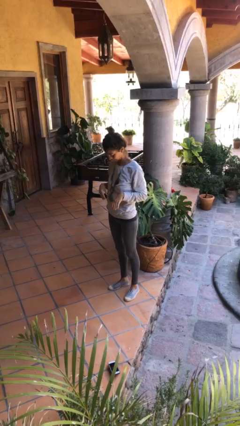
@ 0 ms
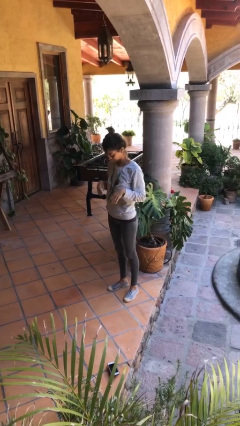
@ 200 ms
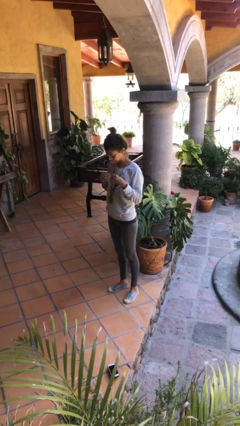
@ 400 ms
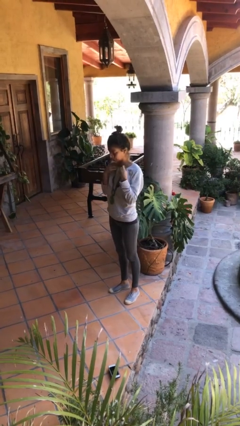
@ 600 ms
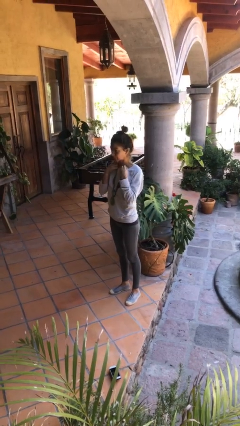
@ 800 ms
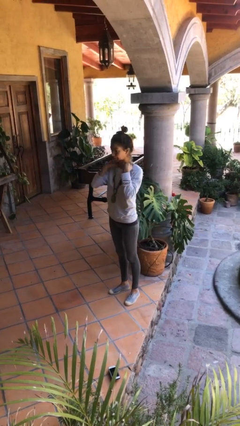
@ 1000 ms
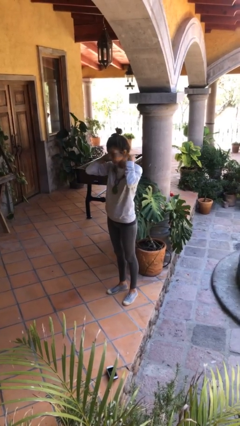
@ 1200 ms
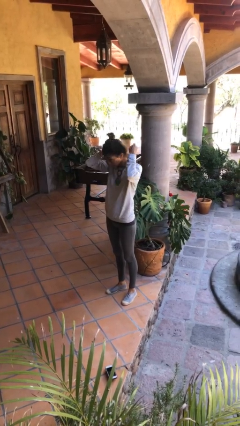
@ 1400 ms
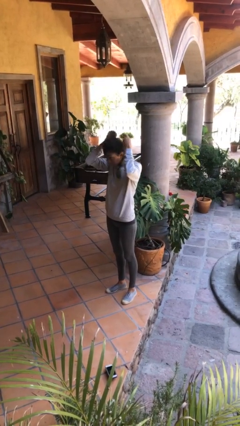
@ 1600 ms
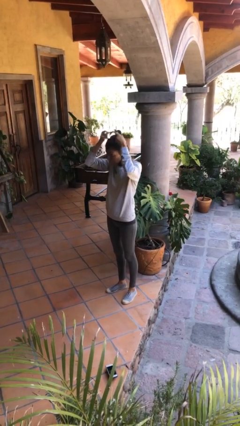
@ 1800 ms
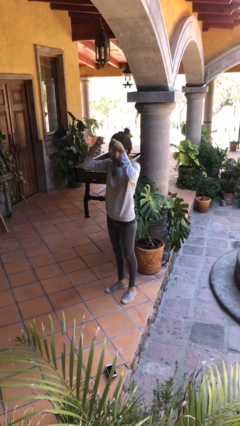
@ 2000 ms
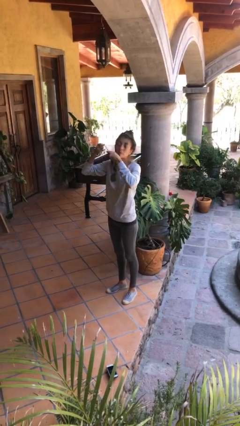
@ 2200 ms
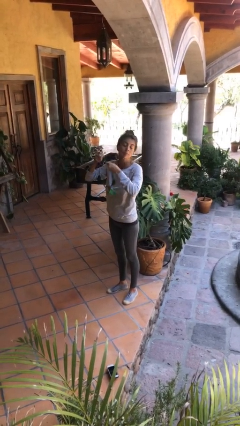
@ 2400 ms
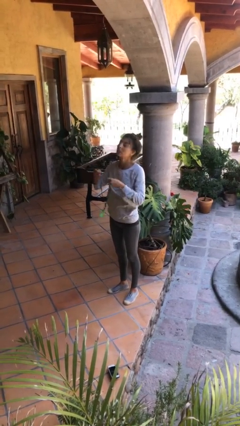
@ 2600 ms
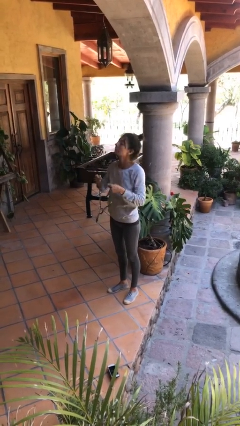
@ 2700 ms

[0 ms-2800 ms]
person takes off necklace

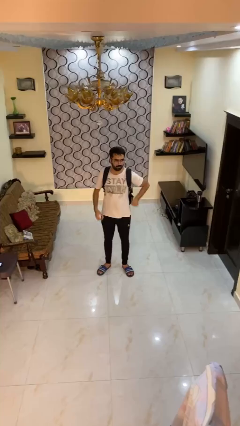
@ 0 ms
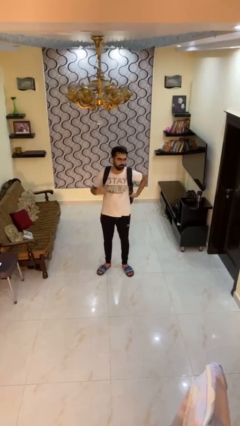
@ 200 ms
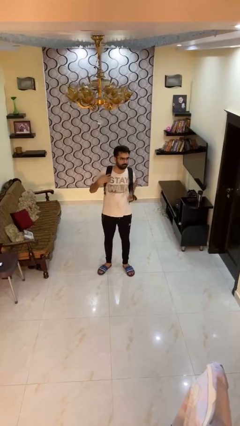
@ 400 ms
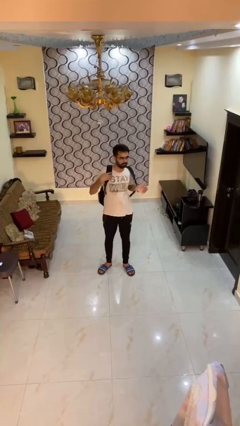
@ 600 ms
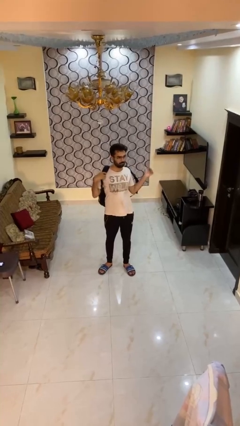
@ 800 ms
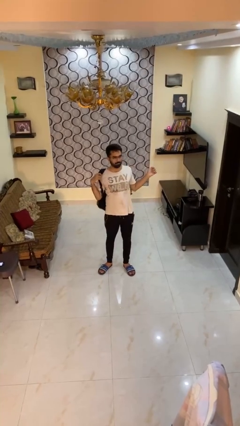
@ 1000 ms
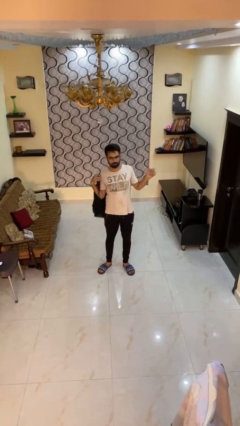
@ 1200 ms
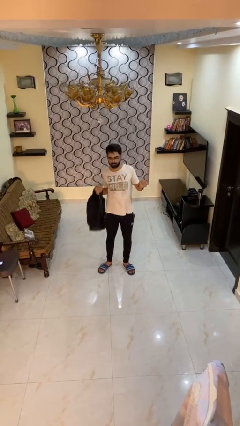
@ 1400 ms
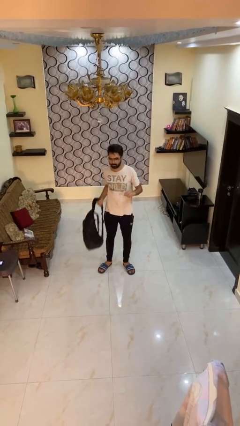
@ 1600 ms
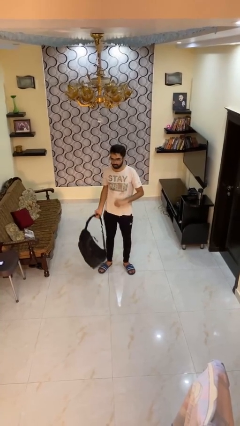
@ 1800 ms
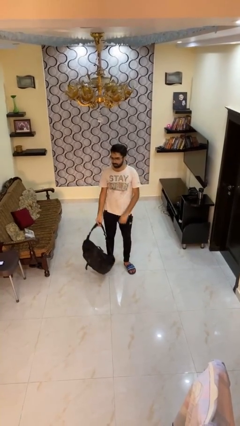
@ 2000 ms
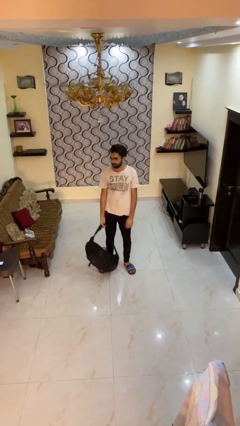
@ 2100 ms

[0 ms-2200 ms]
person takes off backpack

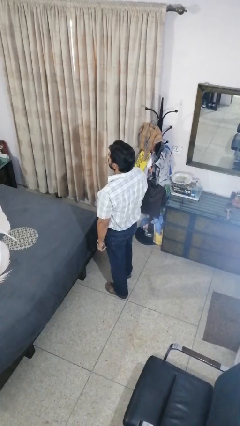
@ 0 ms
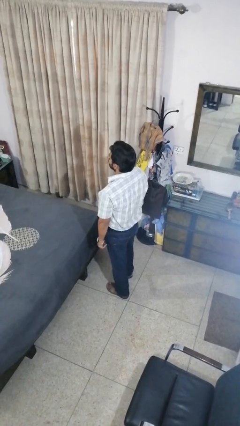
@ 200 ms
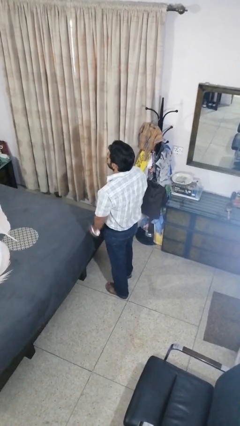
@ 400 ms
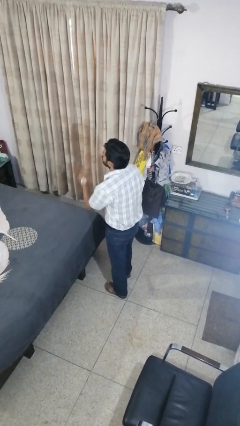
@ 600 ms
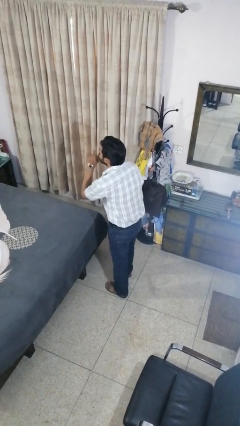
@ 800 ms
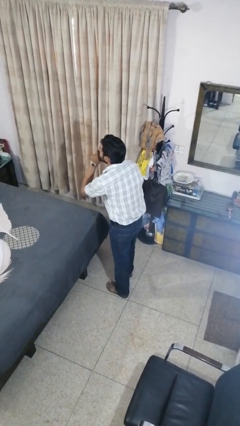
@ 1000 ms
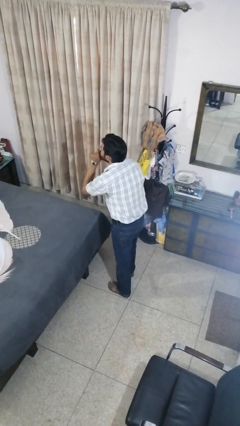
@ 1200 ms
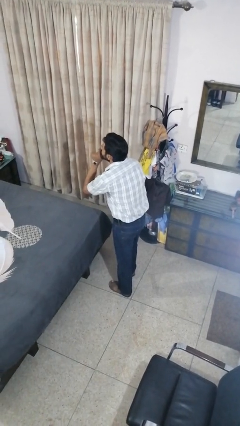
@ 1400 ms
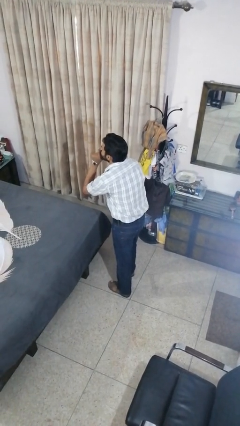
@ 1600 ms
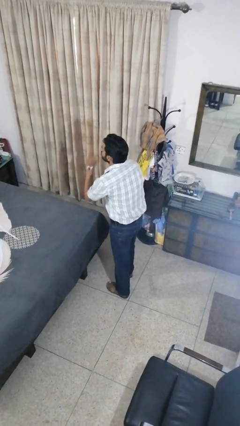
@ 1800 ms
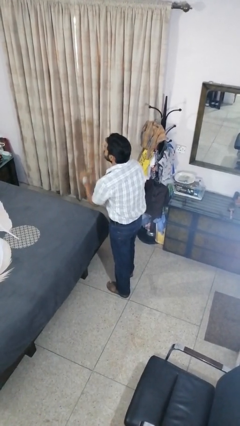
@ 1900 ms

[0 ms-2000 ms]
person gestures be quiet

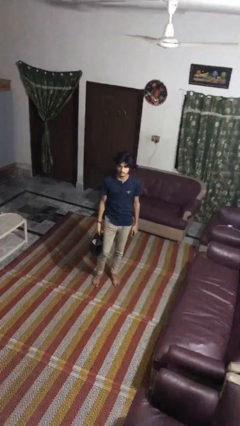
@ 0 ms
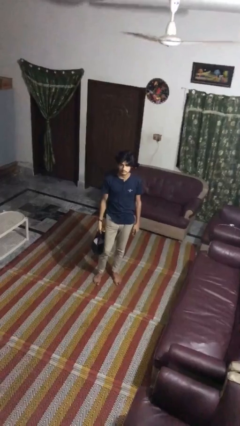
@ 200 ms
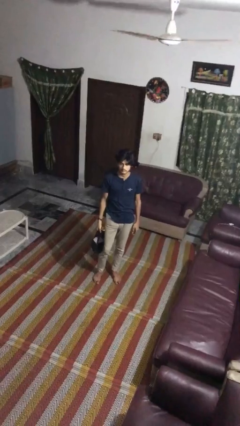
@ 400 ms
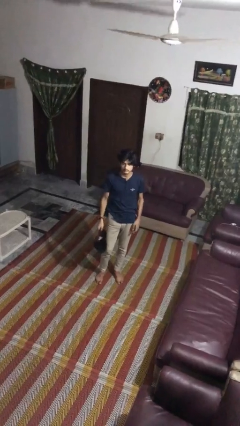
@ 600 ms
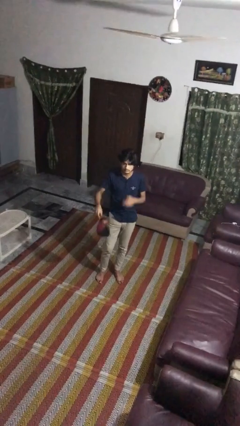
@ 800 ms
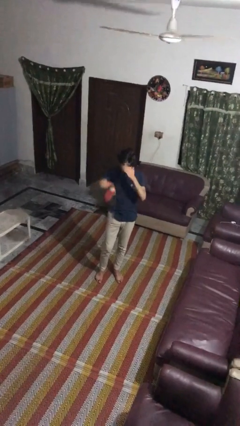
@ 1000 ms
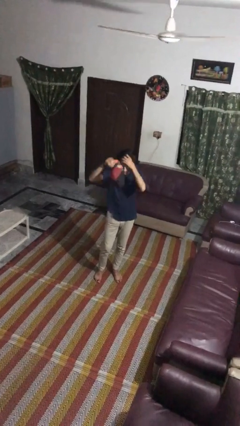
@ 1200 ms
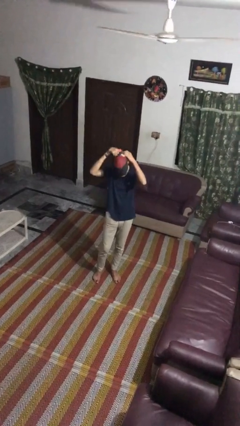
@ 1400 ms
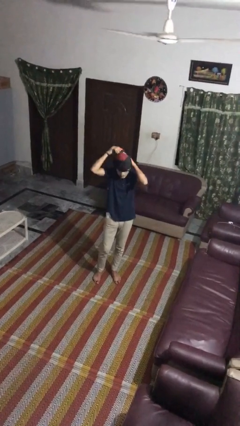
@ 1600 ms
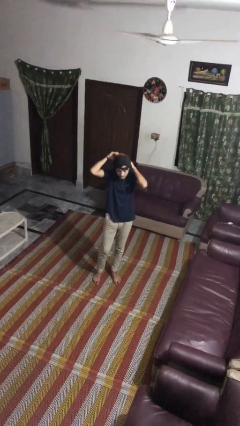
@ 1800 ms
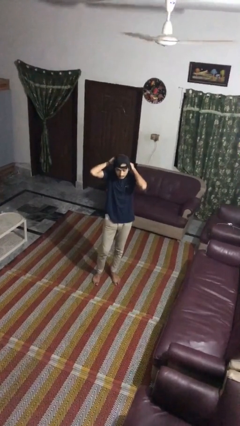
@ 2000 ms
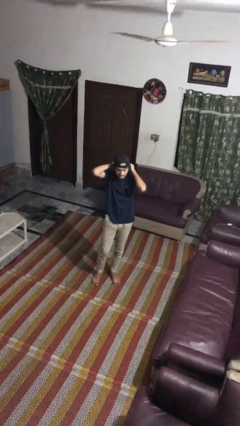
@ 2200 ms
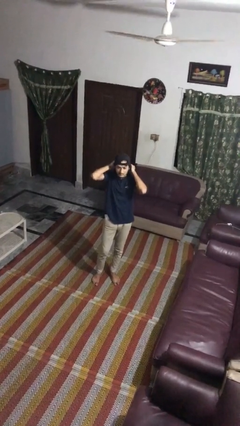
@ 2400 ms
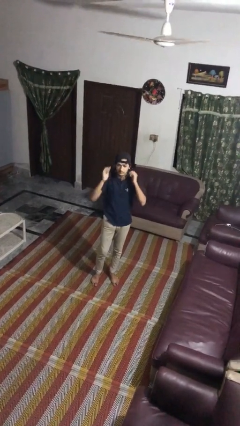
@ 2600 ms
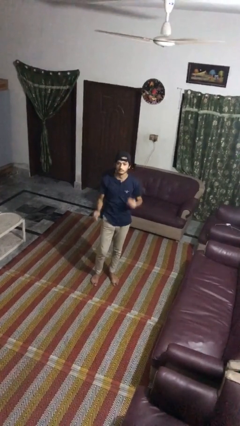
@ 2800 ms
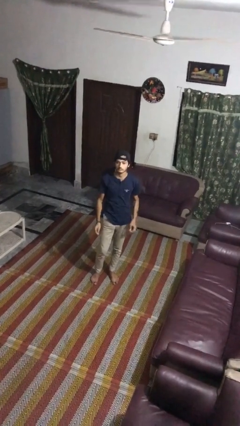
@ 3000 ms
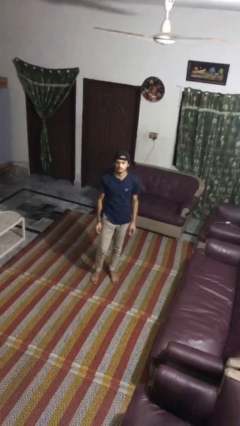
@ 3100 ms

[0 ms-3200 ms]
person puts on hat

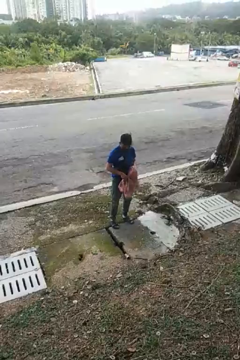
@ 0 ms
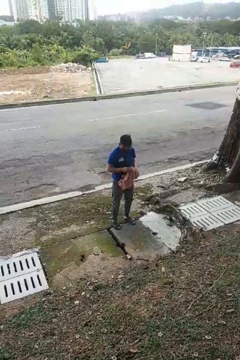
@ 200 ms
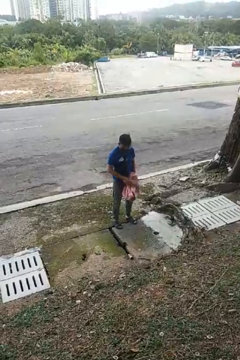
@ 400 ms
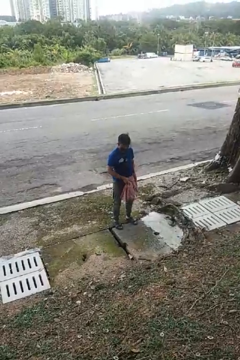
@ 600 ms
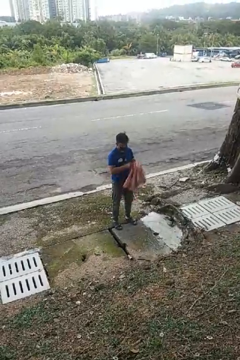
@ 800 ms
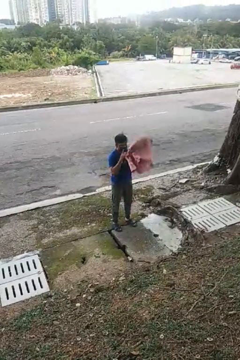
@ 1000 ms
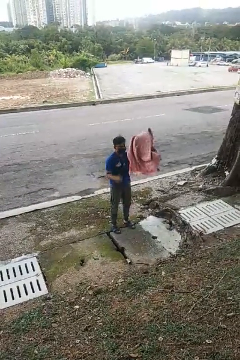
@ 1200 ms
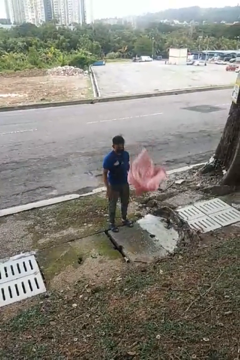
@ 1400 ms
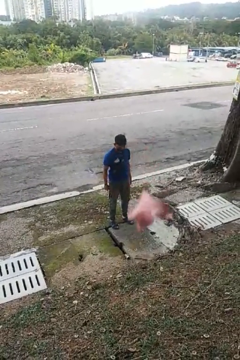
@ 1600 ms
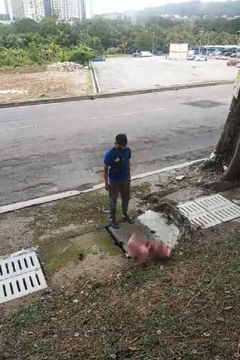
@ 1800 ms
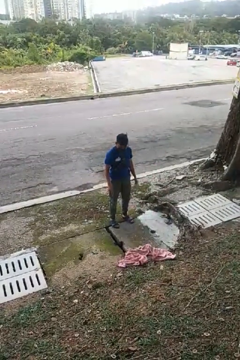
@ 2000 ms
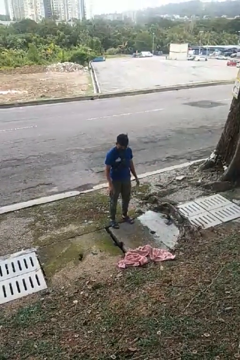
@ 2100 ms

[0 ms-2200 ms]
person throws object into air

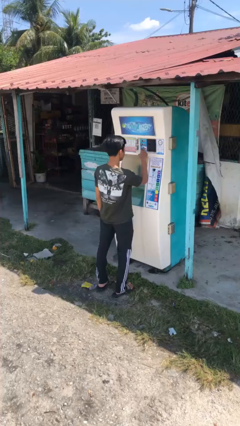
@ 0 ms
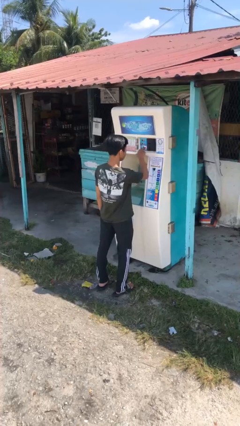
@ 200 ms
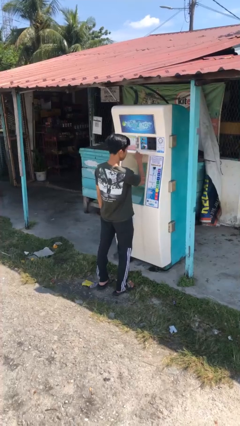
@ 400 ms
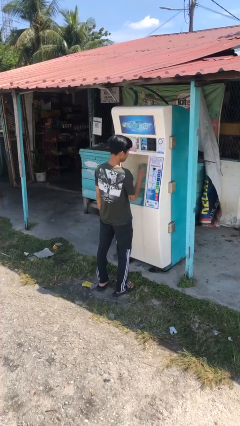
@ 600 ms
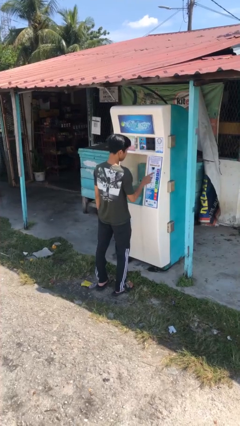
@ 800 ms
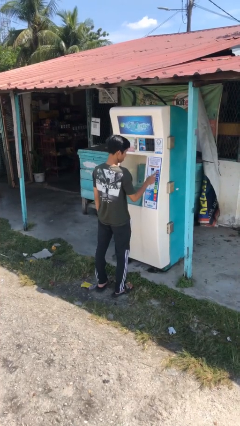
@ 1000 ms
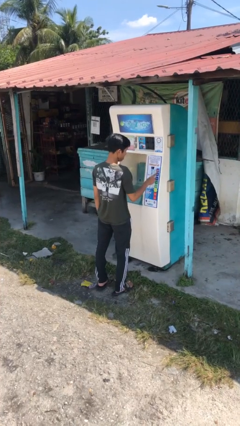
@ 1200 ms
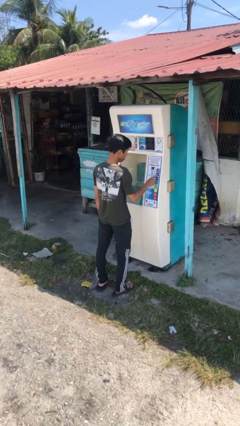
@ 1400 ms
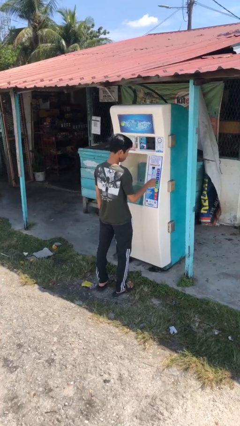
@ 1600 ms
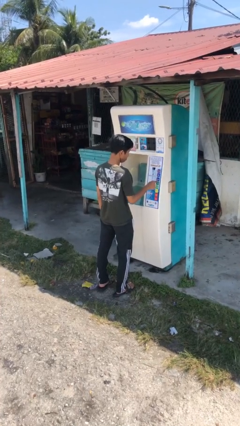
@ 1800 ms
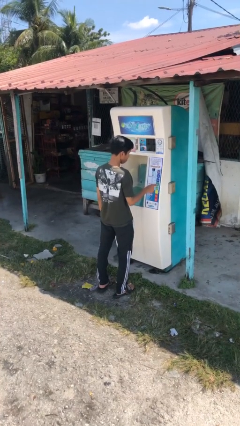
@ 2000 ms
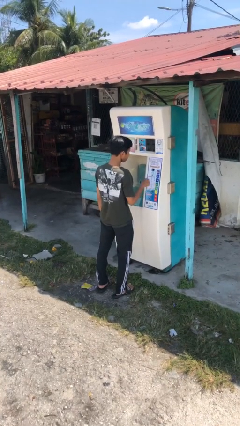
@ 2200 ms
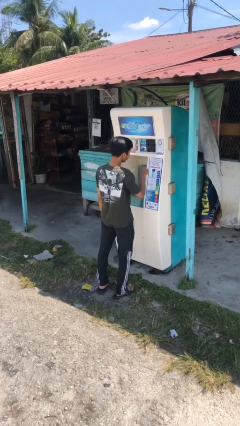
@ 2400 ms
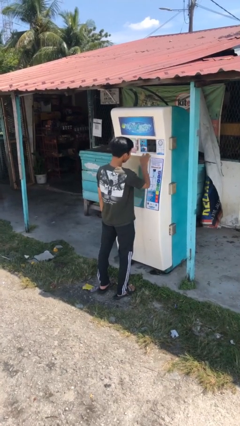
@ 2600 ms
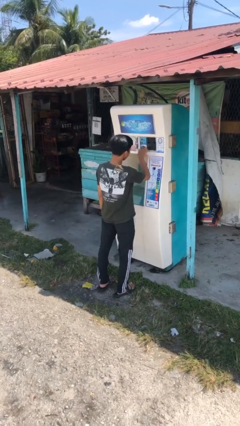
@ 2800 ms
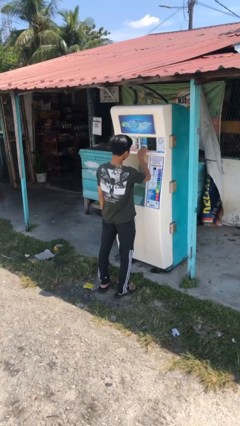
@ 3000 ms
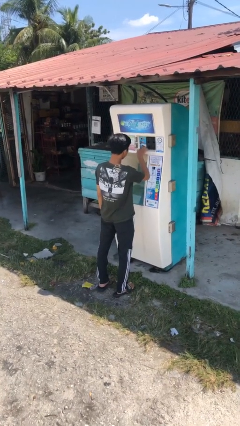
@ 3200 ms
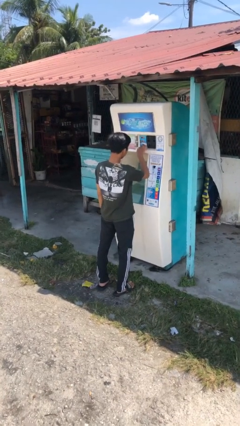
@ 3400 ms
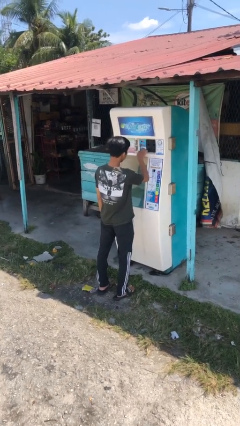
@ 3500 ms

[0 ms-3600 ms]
person purchases from machine

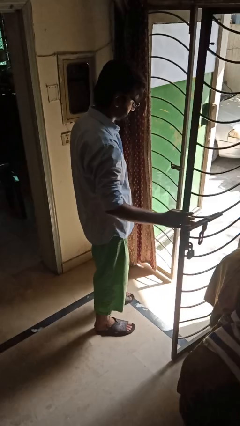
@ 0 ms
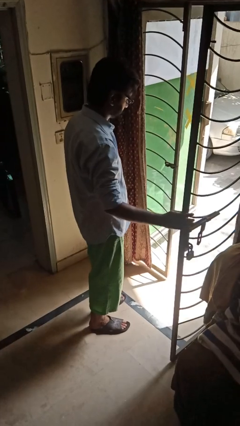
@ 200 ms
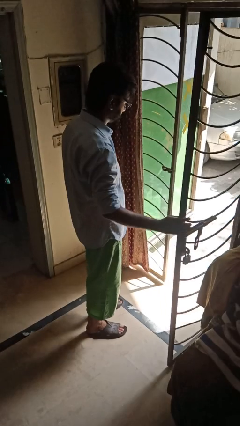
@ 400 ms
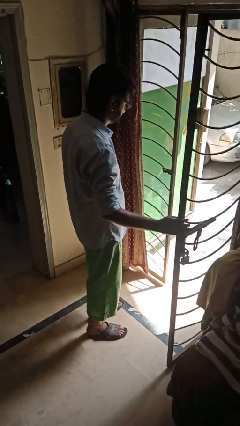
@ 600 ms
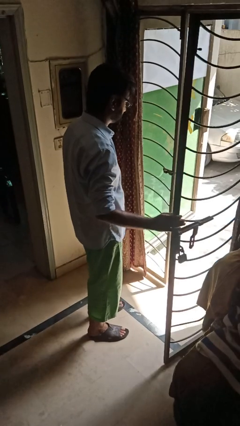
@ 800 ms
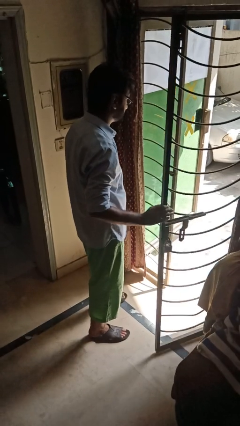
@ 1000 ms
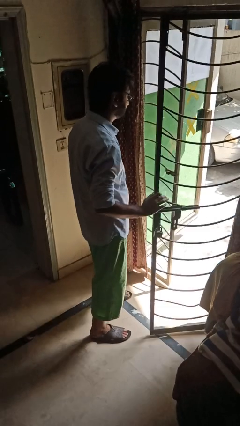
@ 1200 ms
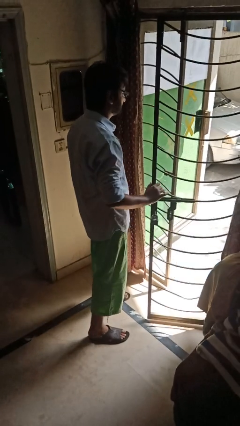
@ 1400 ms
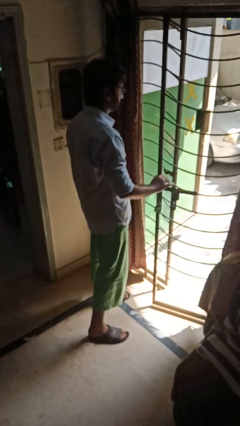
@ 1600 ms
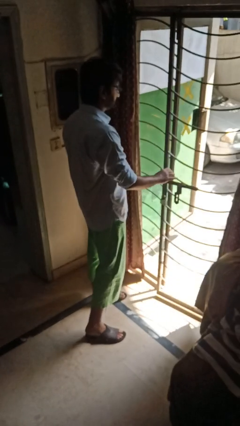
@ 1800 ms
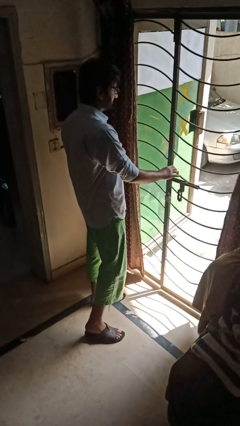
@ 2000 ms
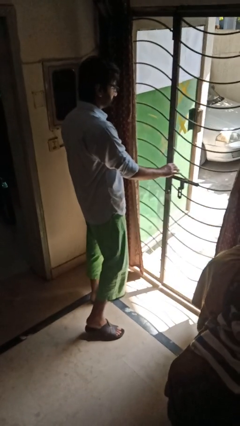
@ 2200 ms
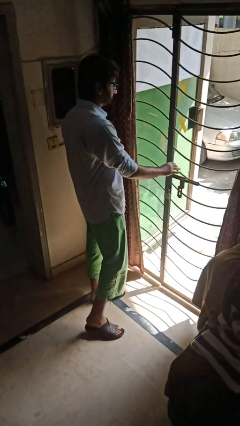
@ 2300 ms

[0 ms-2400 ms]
person closes gate
